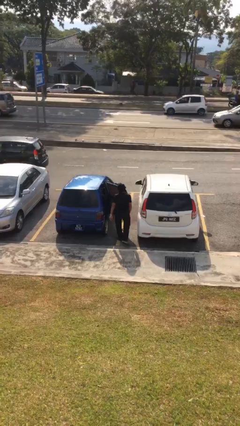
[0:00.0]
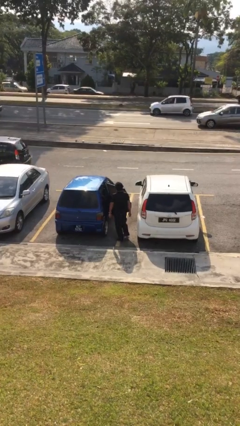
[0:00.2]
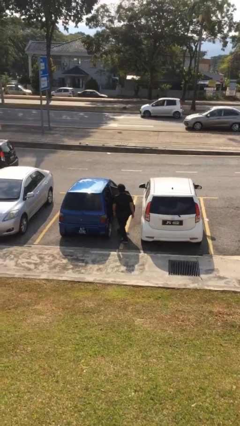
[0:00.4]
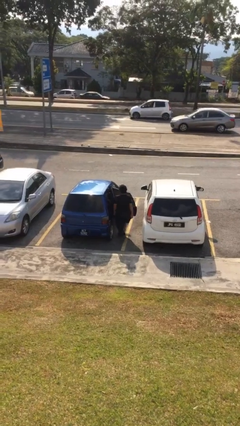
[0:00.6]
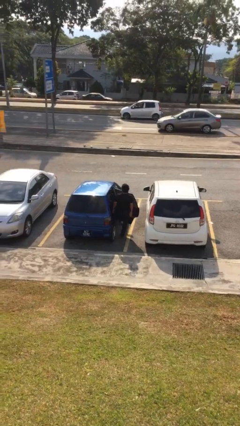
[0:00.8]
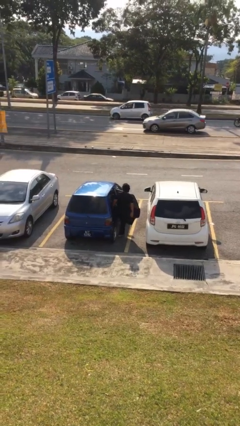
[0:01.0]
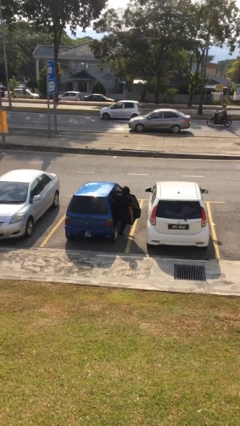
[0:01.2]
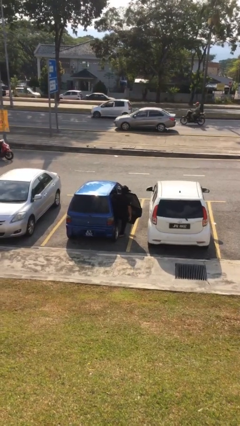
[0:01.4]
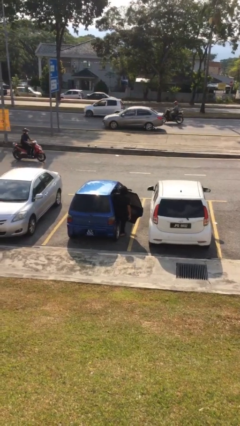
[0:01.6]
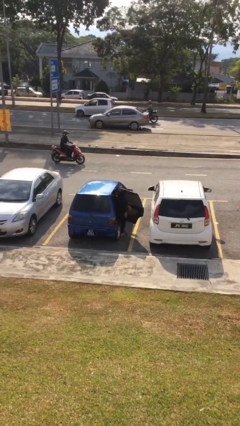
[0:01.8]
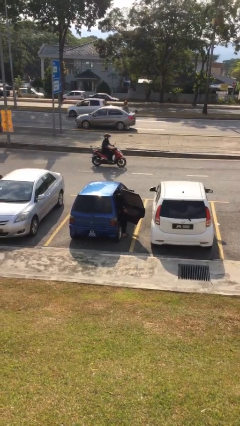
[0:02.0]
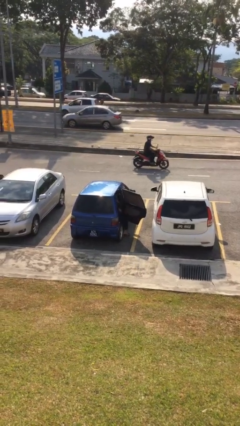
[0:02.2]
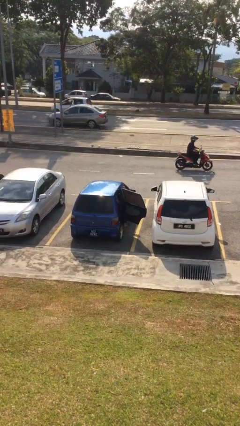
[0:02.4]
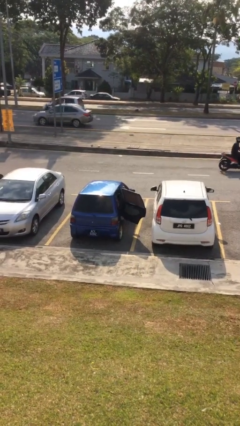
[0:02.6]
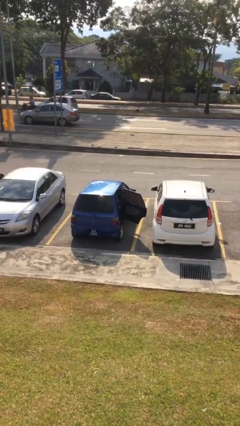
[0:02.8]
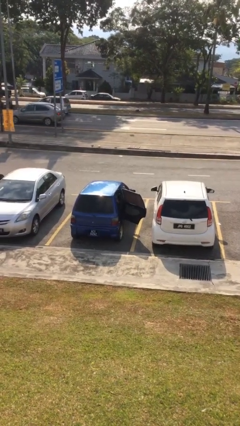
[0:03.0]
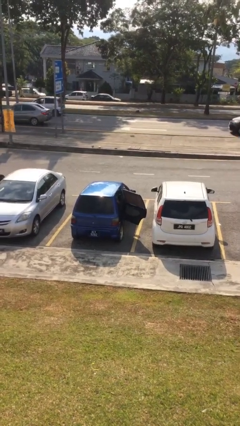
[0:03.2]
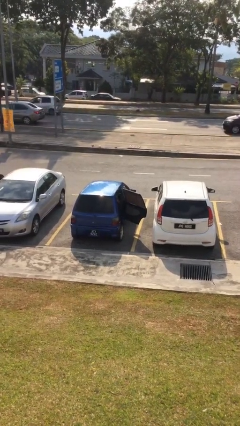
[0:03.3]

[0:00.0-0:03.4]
person enters car

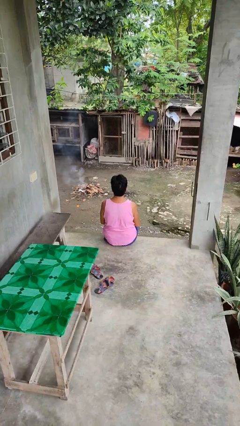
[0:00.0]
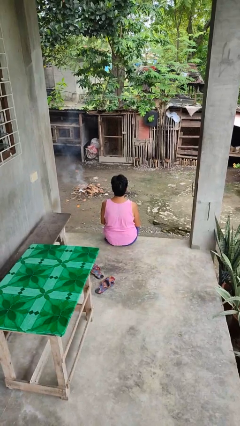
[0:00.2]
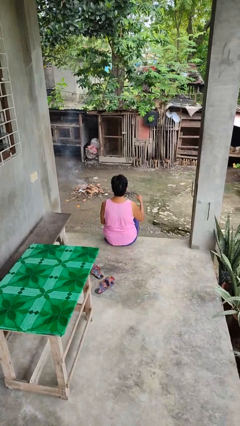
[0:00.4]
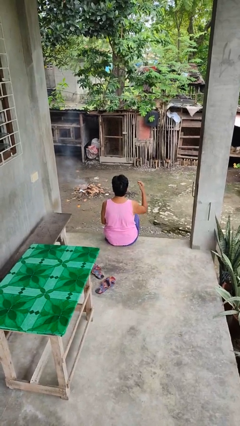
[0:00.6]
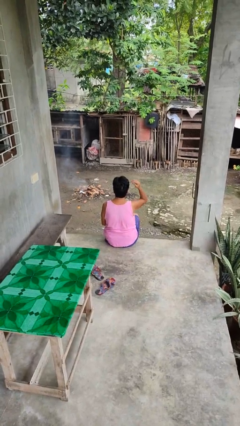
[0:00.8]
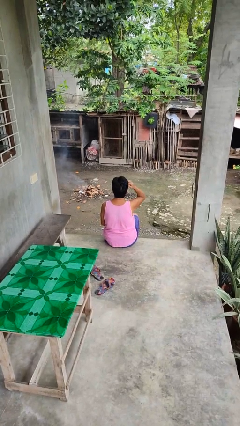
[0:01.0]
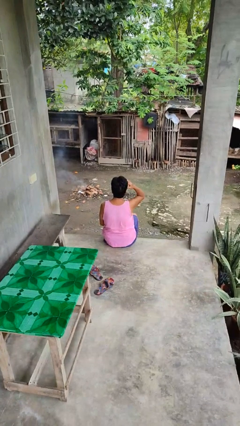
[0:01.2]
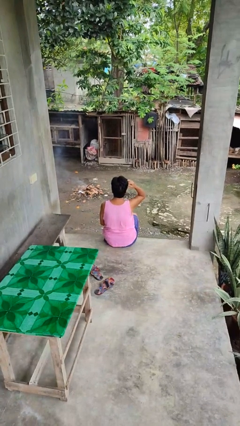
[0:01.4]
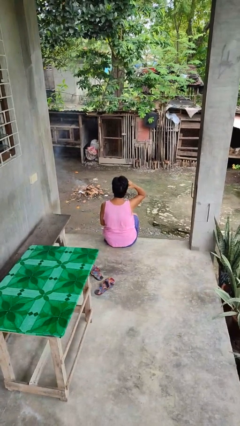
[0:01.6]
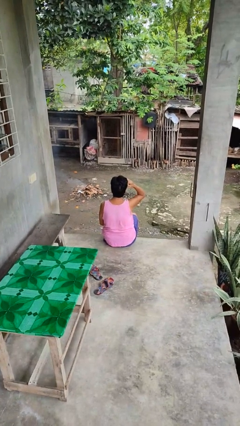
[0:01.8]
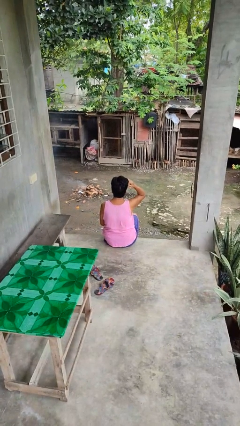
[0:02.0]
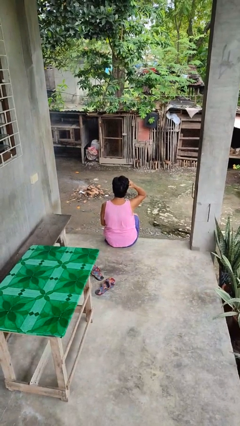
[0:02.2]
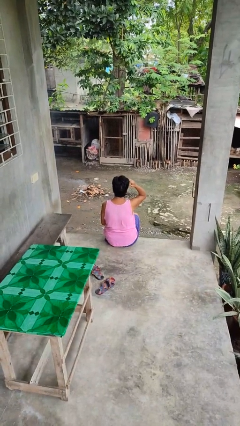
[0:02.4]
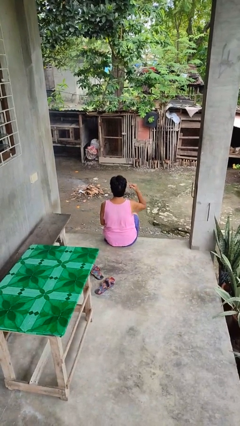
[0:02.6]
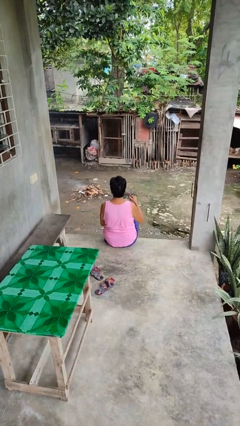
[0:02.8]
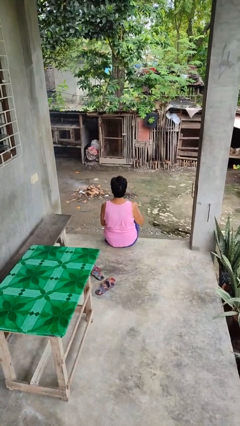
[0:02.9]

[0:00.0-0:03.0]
person scratches face

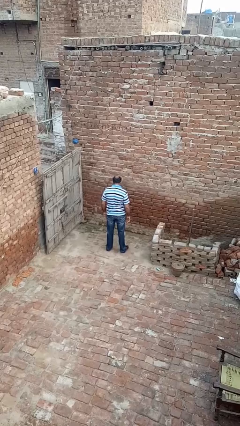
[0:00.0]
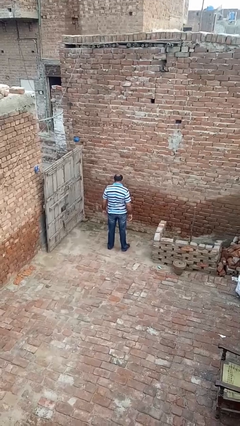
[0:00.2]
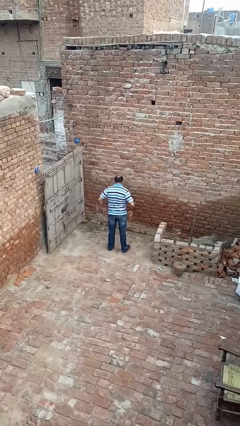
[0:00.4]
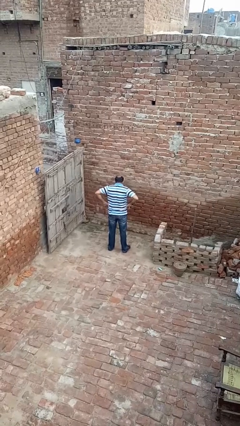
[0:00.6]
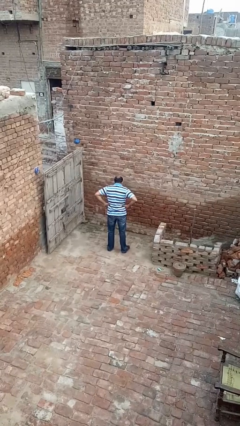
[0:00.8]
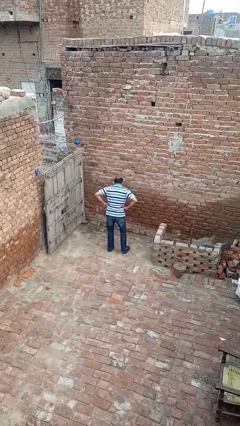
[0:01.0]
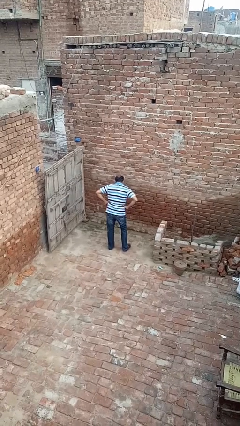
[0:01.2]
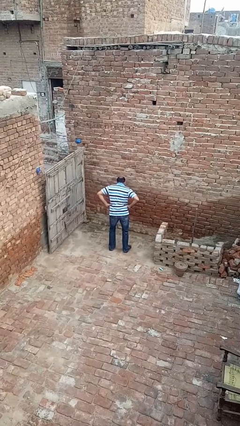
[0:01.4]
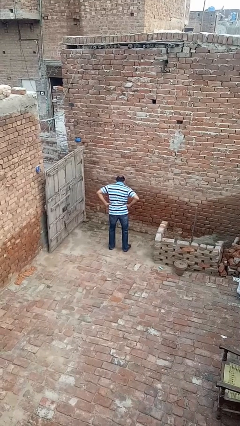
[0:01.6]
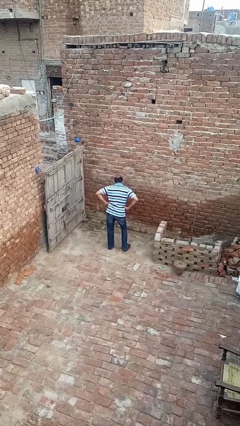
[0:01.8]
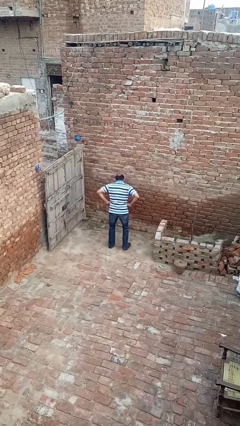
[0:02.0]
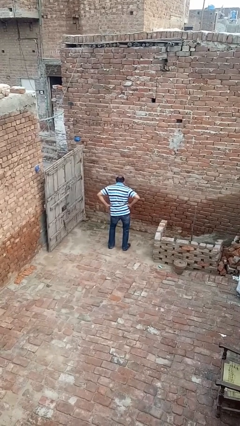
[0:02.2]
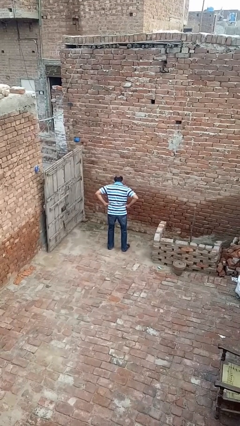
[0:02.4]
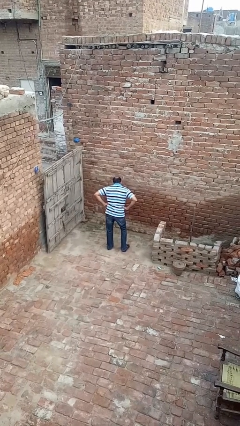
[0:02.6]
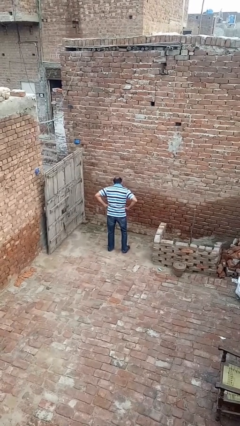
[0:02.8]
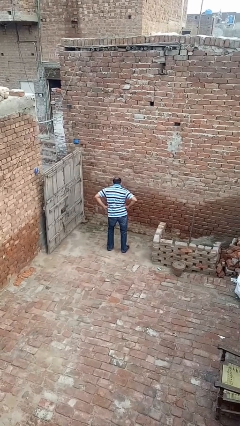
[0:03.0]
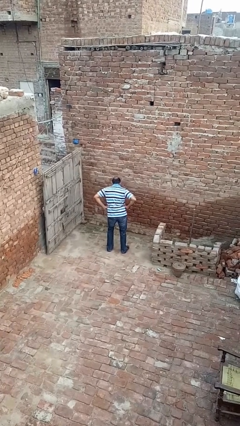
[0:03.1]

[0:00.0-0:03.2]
person wiggles hips

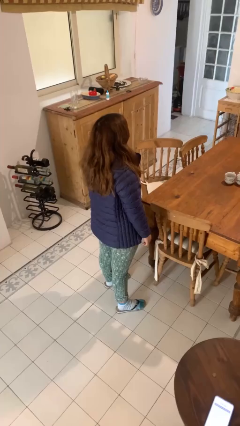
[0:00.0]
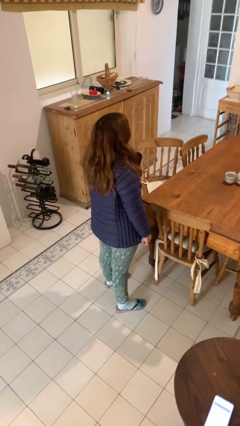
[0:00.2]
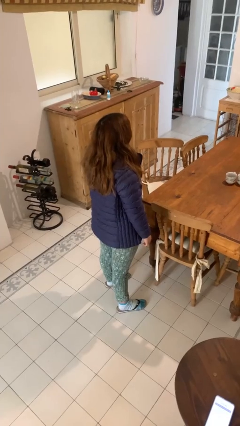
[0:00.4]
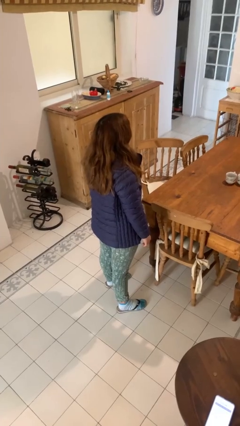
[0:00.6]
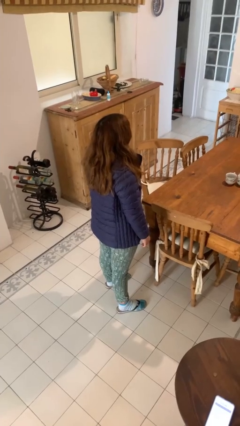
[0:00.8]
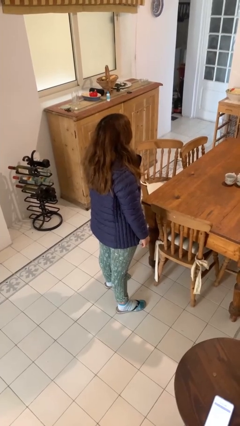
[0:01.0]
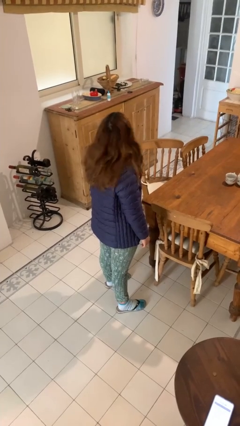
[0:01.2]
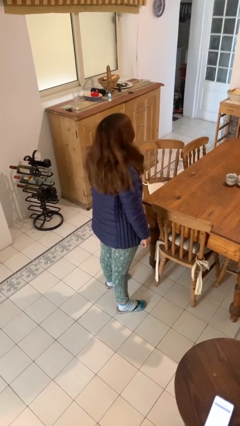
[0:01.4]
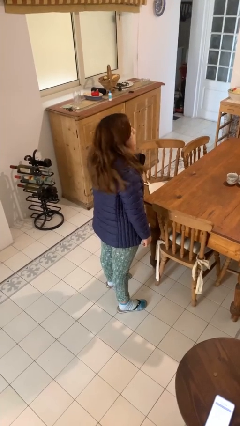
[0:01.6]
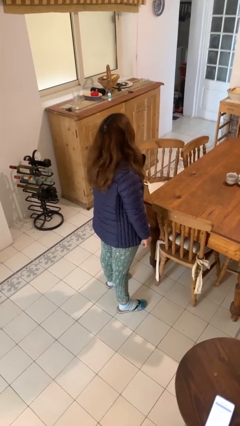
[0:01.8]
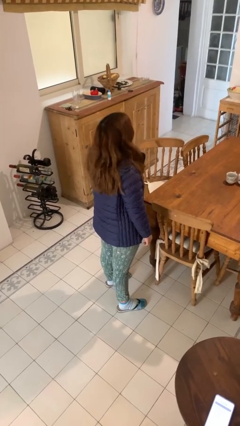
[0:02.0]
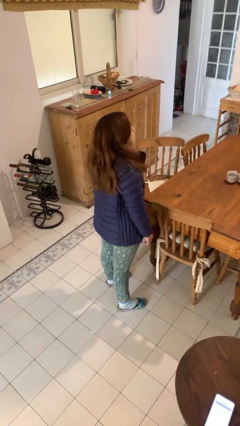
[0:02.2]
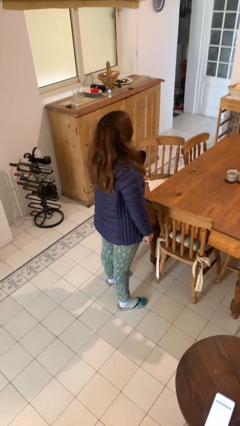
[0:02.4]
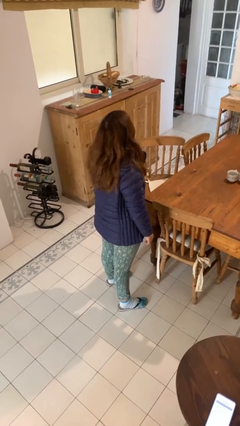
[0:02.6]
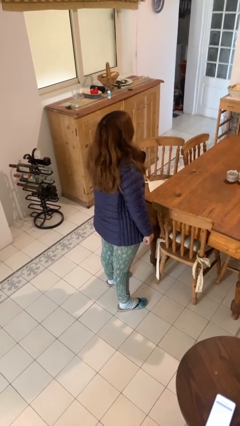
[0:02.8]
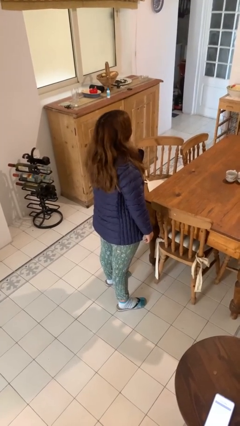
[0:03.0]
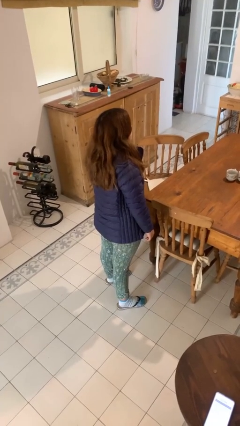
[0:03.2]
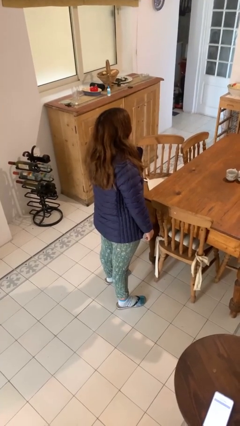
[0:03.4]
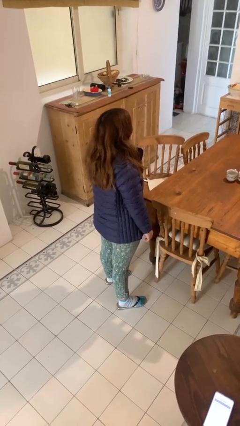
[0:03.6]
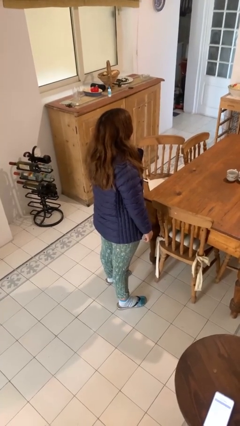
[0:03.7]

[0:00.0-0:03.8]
person shakes head

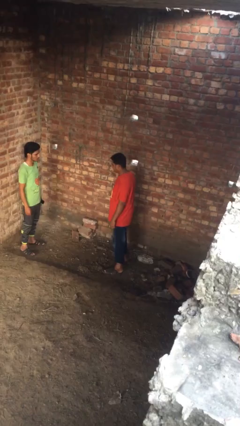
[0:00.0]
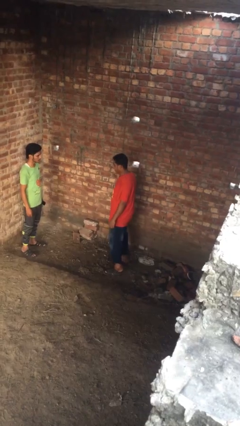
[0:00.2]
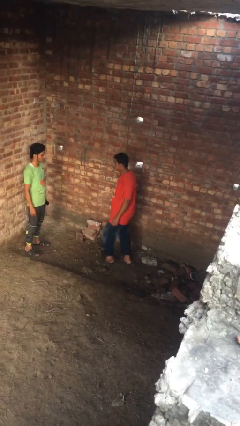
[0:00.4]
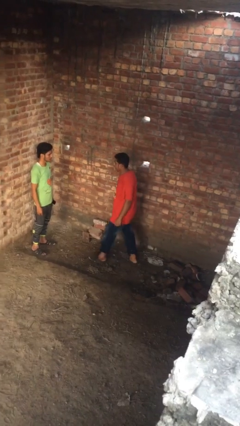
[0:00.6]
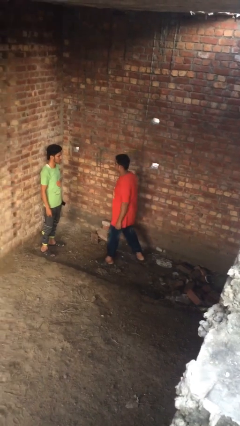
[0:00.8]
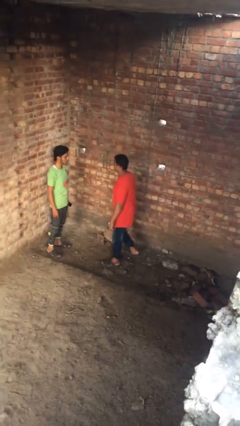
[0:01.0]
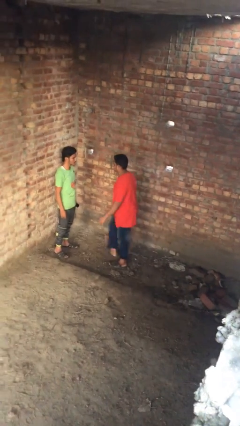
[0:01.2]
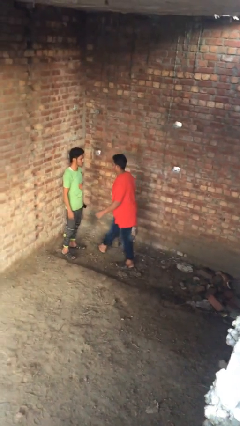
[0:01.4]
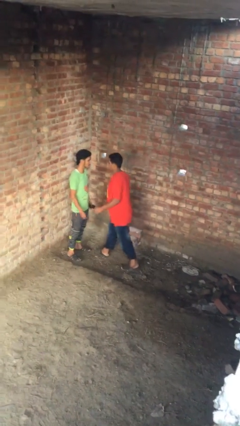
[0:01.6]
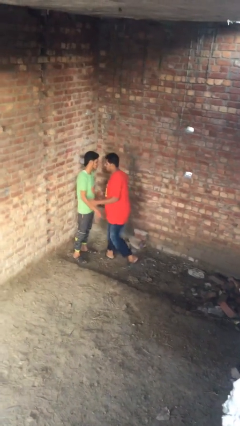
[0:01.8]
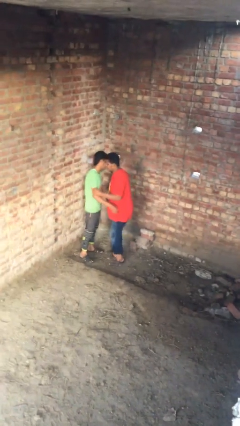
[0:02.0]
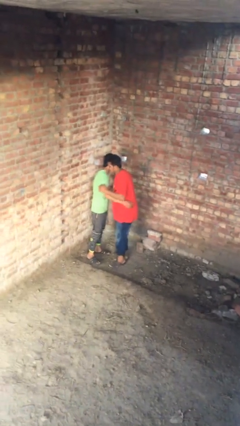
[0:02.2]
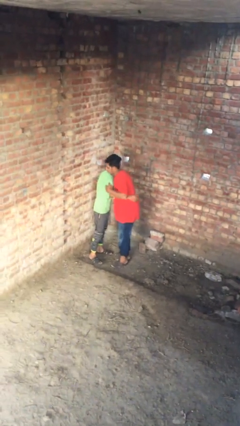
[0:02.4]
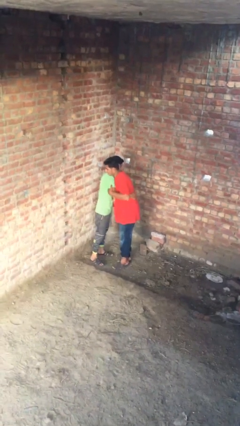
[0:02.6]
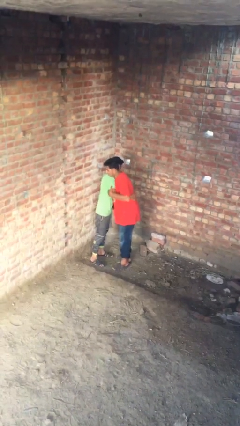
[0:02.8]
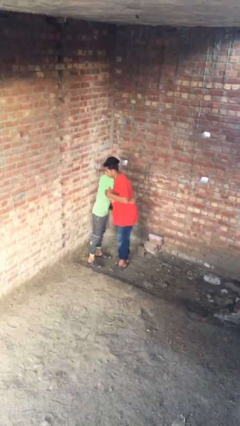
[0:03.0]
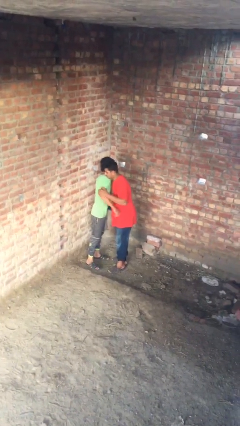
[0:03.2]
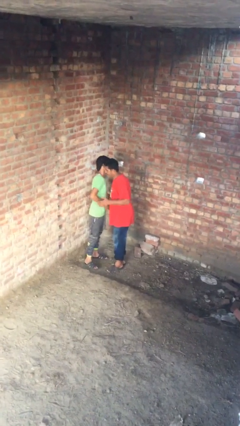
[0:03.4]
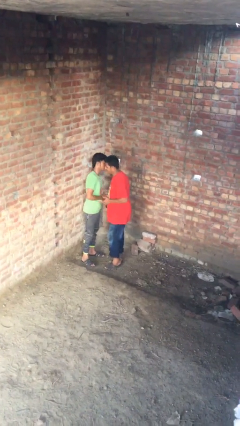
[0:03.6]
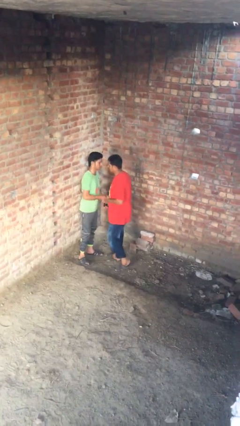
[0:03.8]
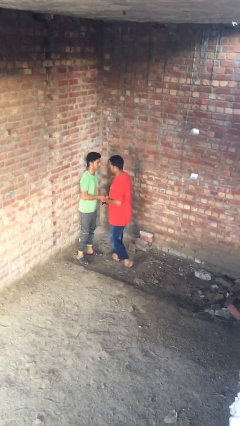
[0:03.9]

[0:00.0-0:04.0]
person embraces person

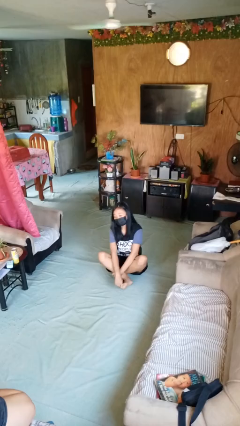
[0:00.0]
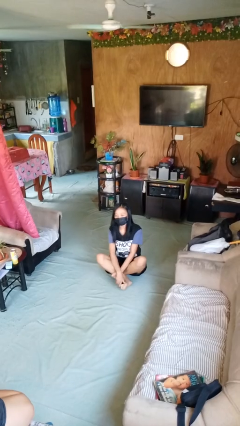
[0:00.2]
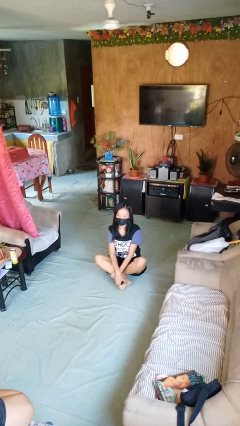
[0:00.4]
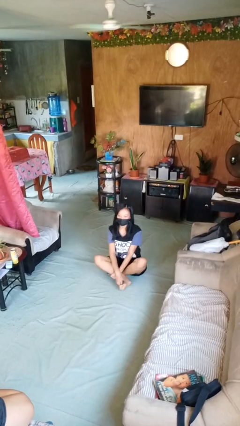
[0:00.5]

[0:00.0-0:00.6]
person sits crisscross
